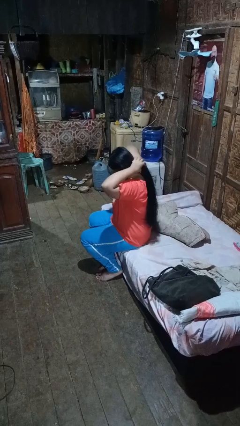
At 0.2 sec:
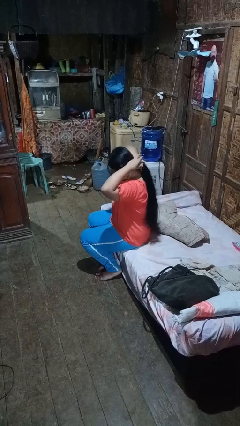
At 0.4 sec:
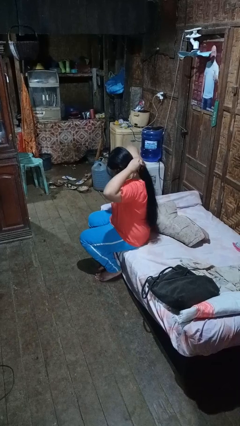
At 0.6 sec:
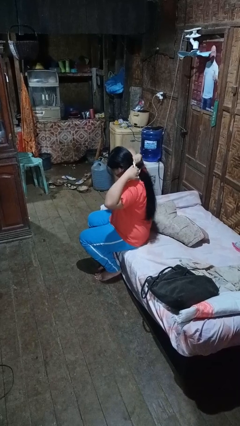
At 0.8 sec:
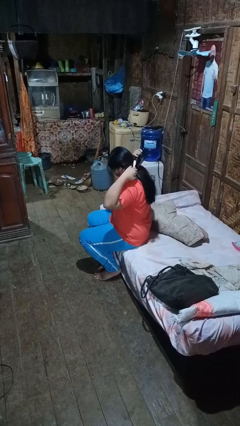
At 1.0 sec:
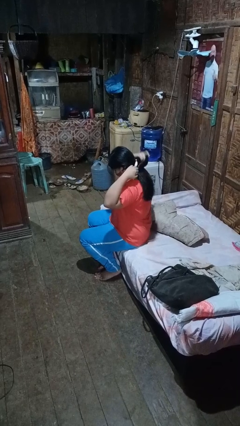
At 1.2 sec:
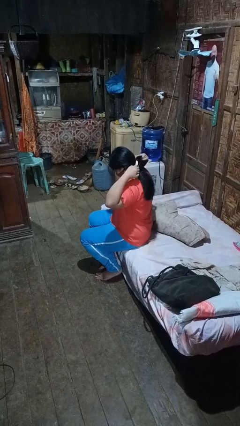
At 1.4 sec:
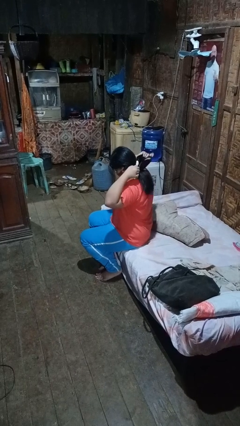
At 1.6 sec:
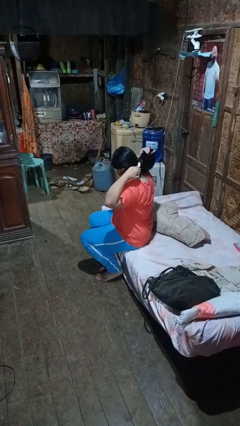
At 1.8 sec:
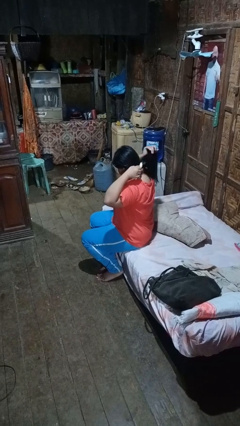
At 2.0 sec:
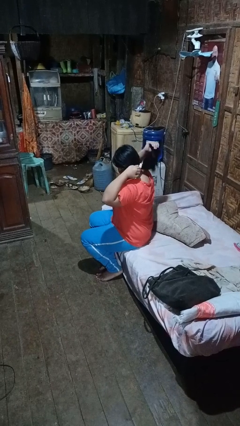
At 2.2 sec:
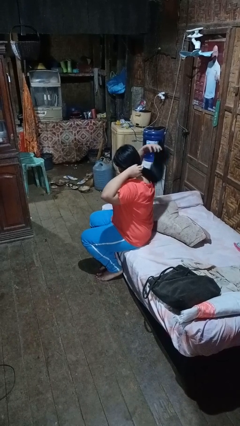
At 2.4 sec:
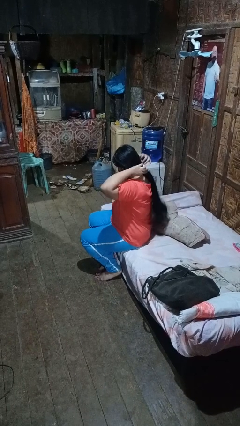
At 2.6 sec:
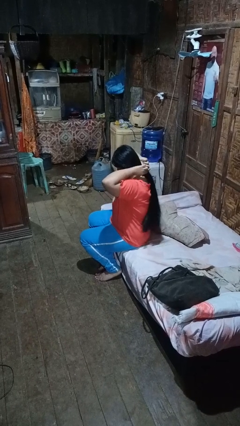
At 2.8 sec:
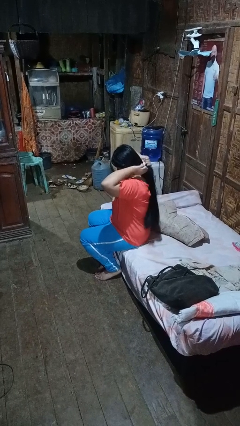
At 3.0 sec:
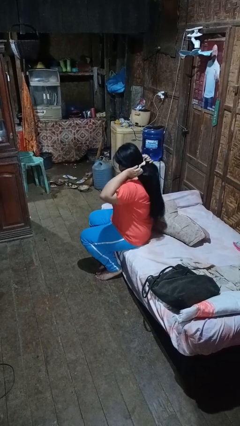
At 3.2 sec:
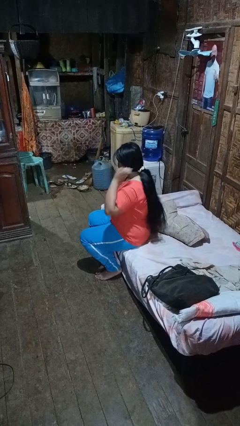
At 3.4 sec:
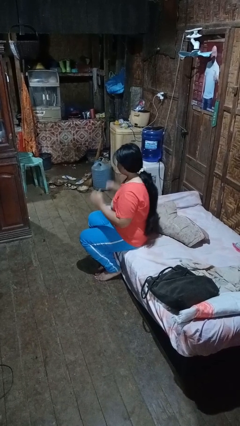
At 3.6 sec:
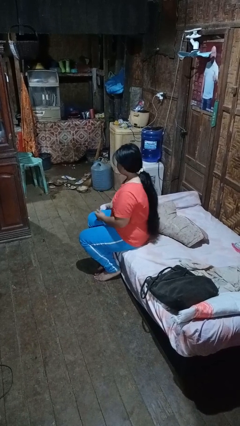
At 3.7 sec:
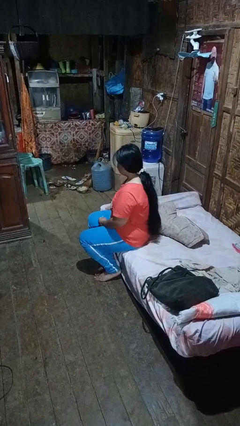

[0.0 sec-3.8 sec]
person puts hair in ponytail

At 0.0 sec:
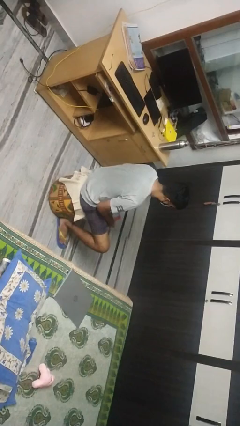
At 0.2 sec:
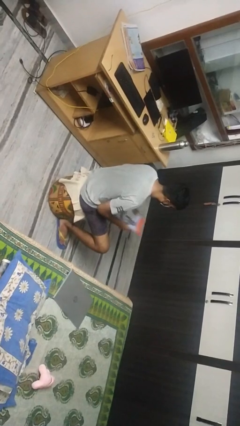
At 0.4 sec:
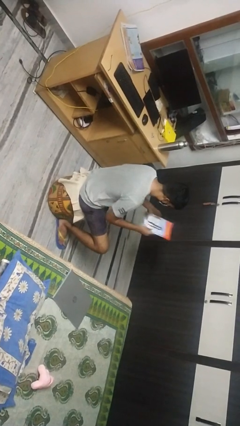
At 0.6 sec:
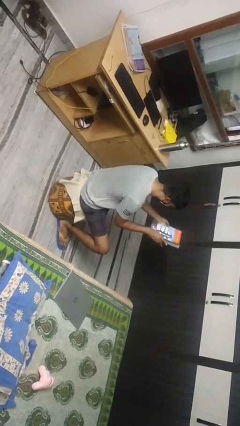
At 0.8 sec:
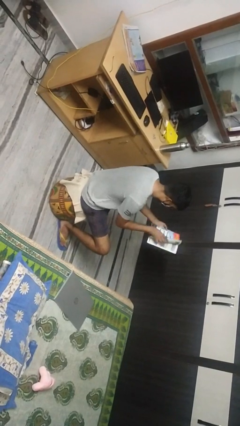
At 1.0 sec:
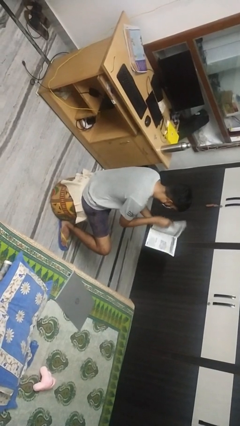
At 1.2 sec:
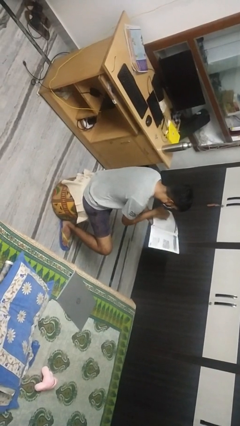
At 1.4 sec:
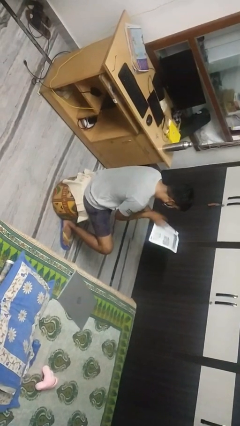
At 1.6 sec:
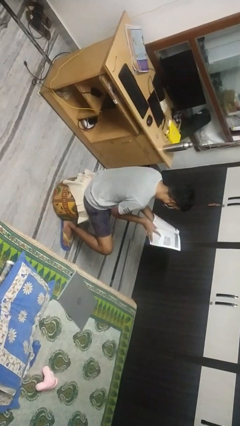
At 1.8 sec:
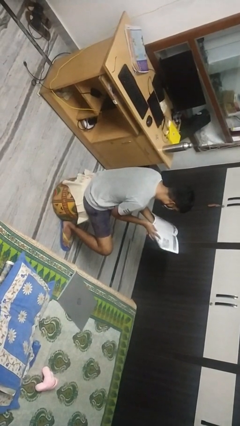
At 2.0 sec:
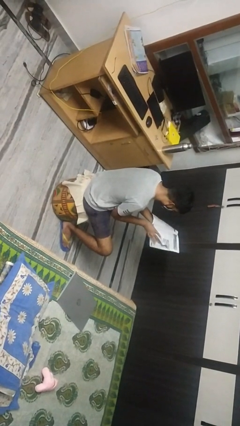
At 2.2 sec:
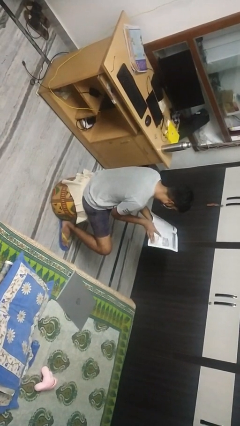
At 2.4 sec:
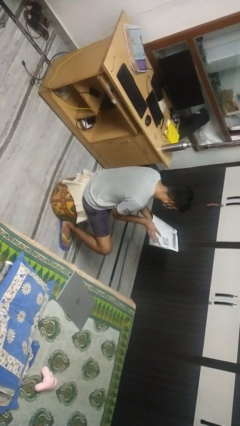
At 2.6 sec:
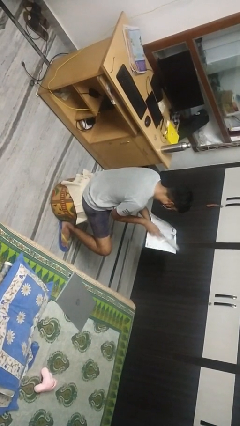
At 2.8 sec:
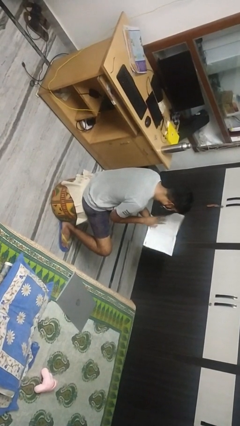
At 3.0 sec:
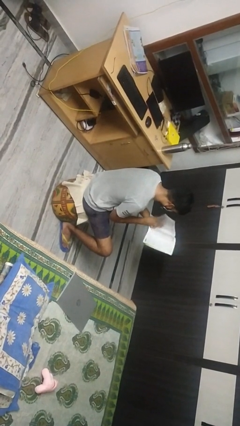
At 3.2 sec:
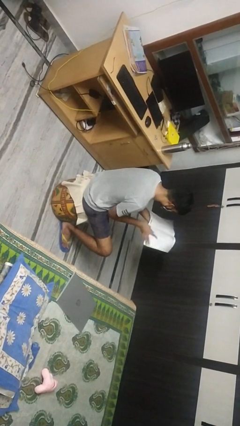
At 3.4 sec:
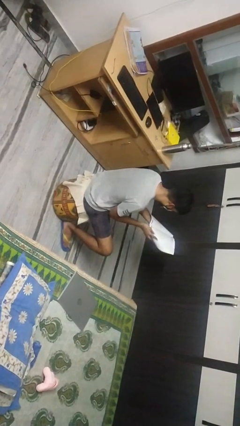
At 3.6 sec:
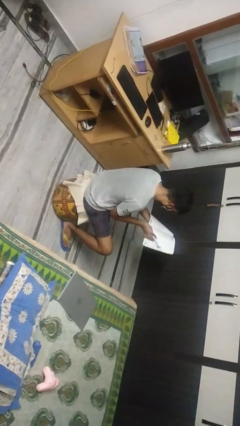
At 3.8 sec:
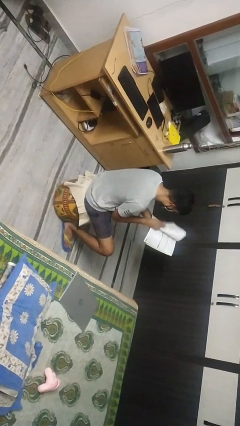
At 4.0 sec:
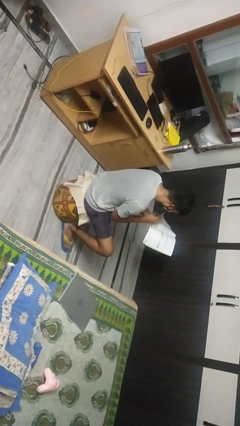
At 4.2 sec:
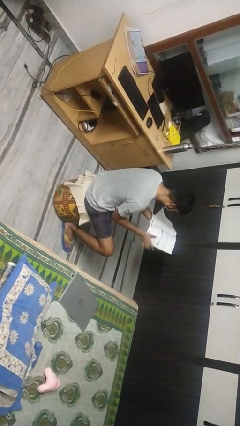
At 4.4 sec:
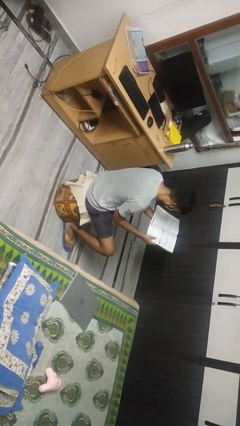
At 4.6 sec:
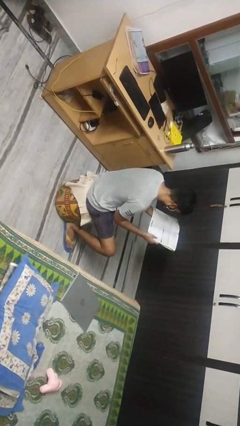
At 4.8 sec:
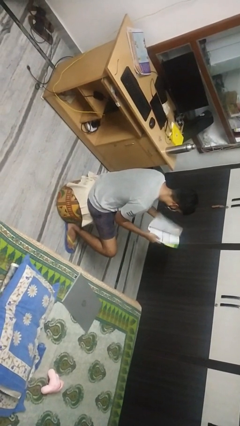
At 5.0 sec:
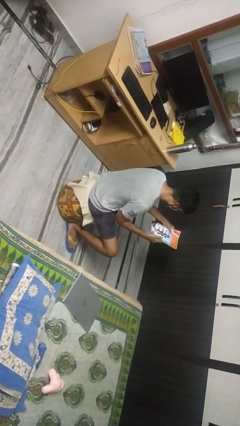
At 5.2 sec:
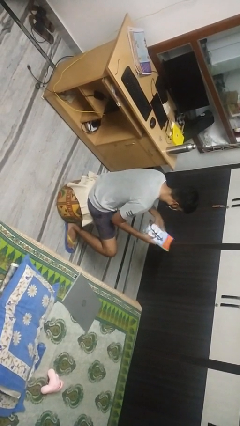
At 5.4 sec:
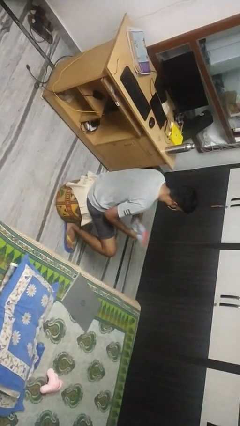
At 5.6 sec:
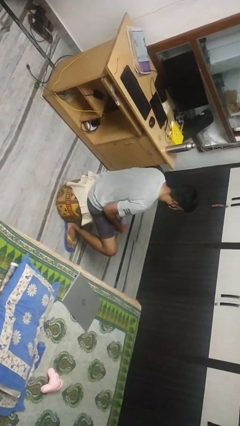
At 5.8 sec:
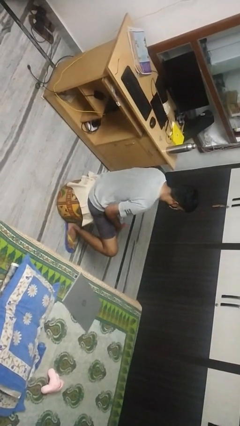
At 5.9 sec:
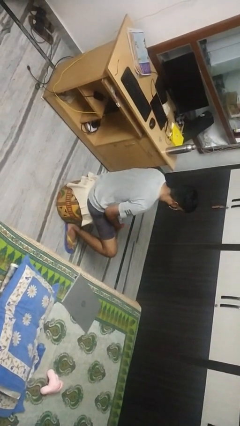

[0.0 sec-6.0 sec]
person reads magazine

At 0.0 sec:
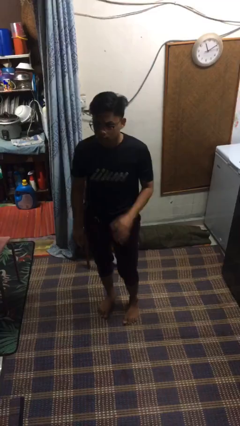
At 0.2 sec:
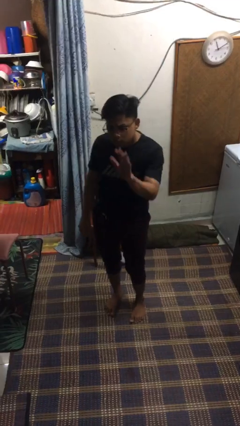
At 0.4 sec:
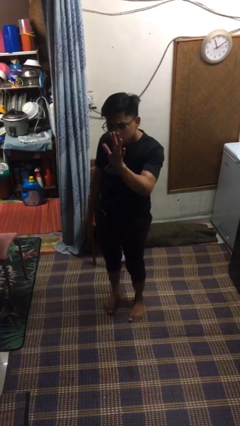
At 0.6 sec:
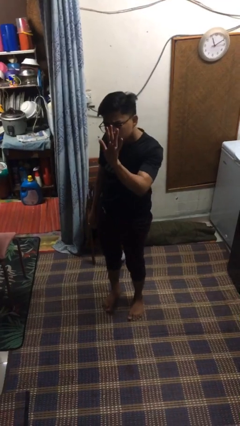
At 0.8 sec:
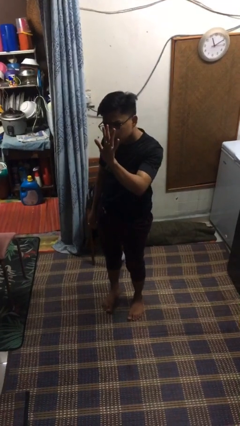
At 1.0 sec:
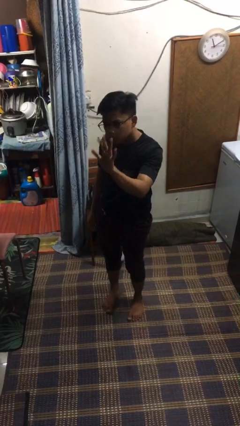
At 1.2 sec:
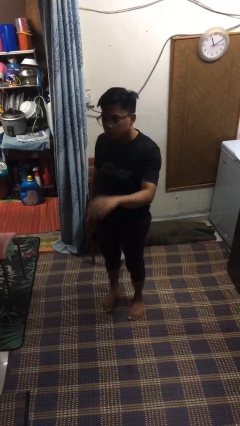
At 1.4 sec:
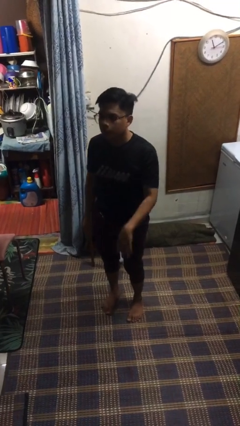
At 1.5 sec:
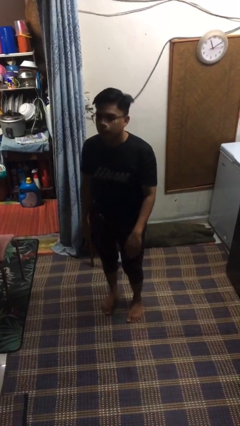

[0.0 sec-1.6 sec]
person gestures stop

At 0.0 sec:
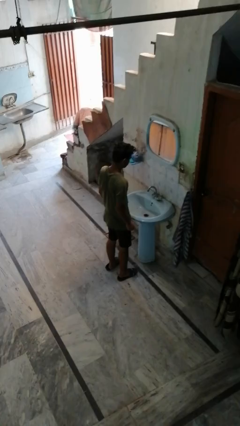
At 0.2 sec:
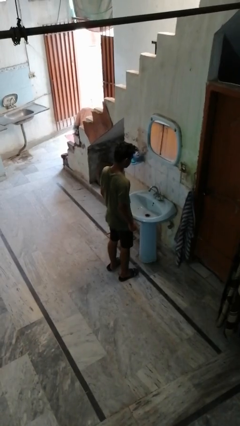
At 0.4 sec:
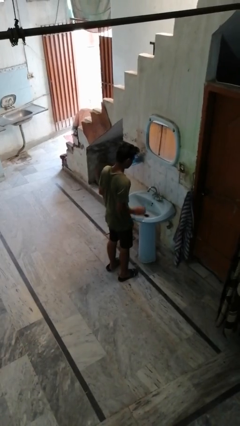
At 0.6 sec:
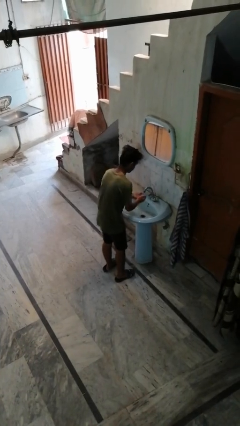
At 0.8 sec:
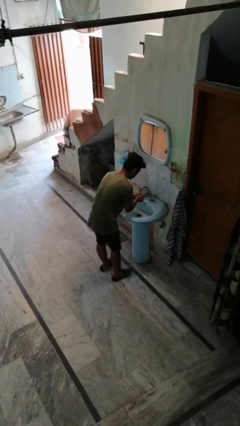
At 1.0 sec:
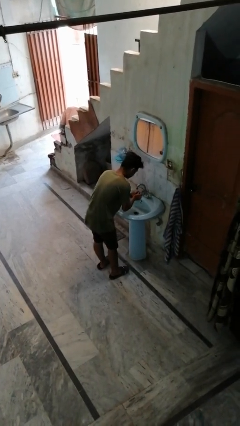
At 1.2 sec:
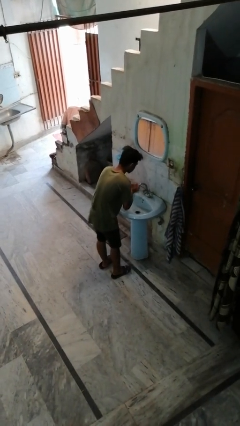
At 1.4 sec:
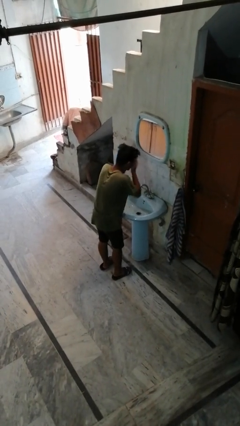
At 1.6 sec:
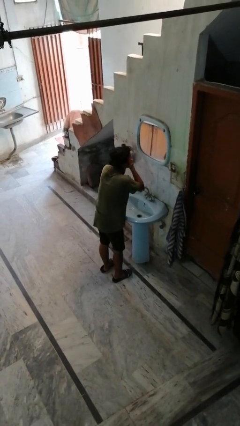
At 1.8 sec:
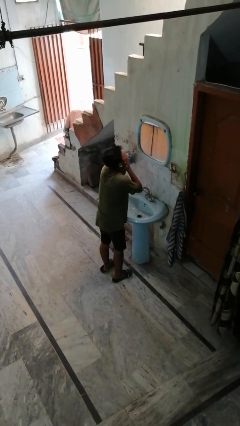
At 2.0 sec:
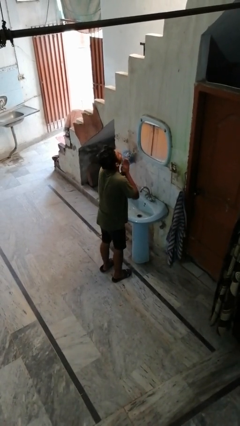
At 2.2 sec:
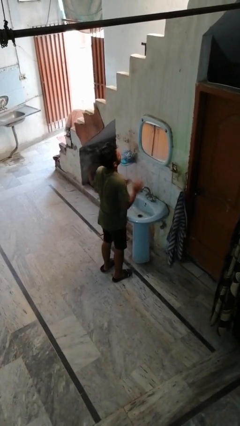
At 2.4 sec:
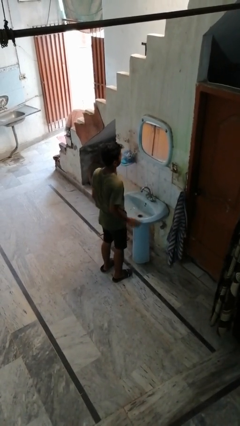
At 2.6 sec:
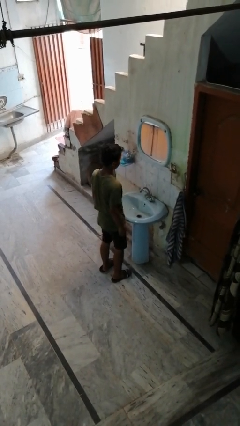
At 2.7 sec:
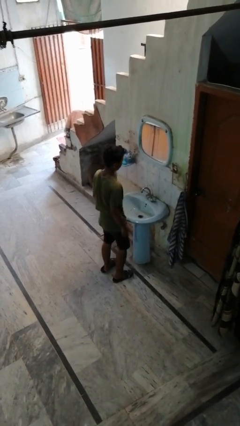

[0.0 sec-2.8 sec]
person washes face

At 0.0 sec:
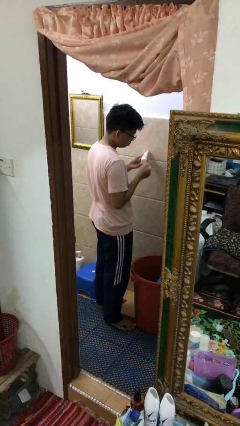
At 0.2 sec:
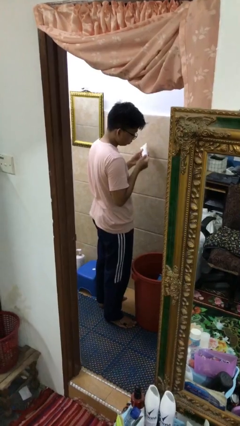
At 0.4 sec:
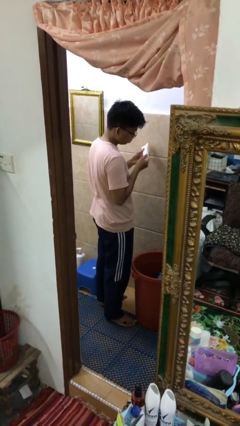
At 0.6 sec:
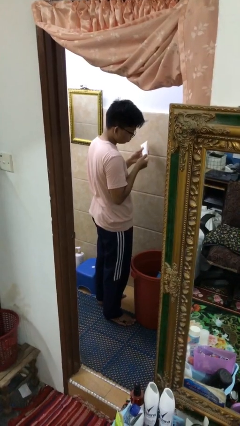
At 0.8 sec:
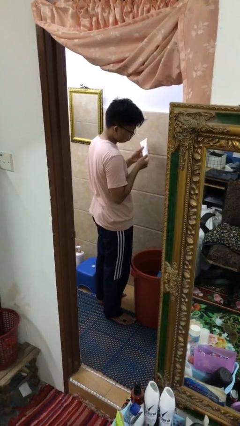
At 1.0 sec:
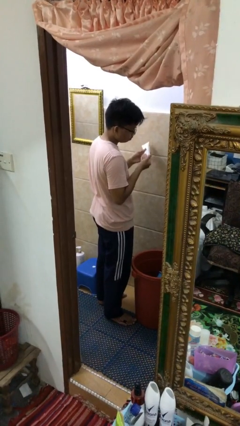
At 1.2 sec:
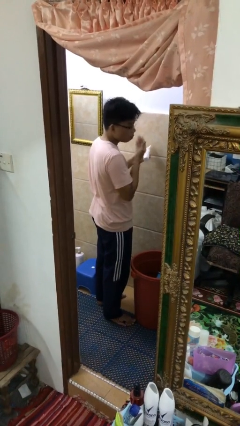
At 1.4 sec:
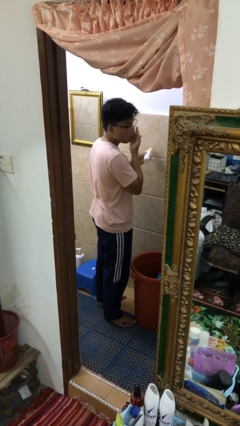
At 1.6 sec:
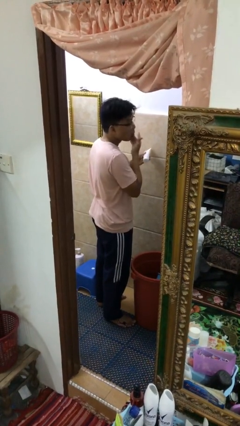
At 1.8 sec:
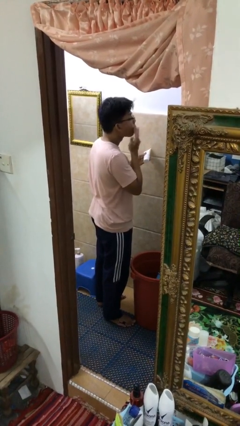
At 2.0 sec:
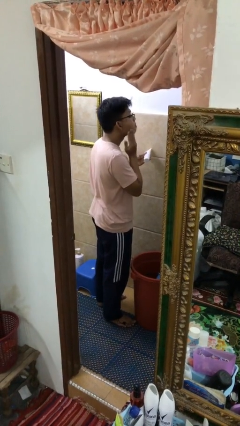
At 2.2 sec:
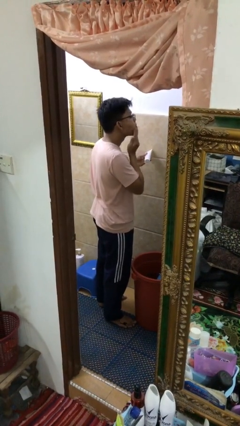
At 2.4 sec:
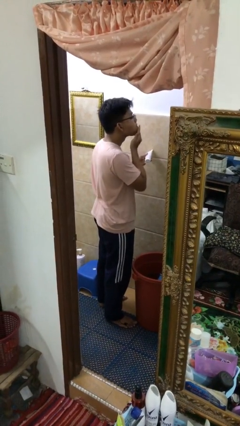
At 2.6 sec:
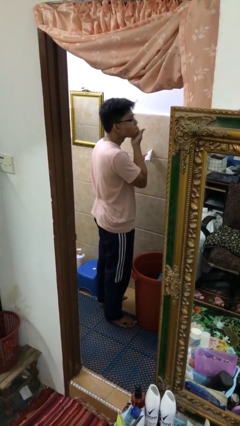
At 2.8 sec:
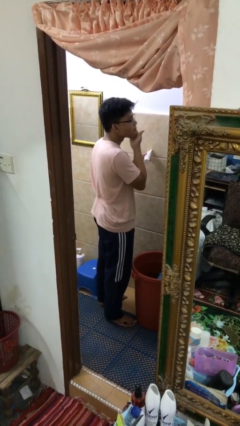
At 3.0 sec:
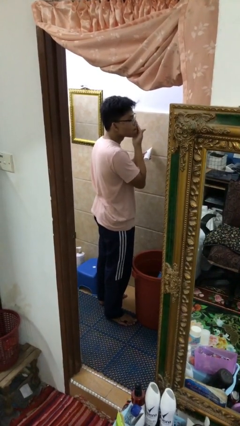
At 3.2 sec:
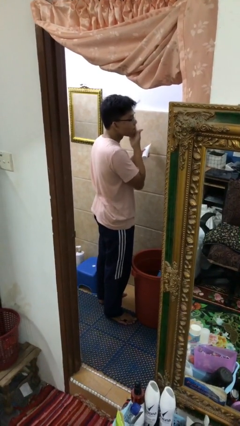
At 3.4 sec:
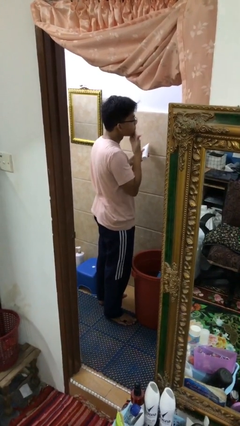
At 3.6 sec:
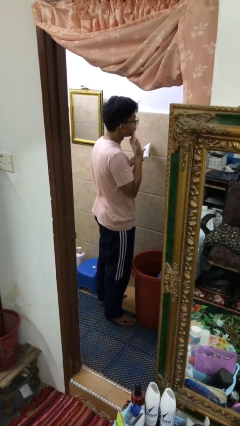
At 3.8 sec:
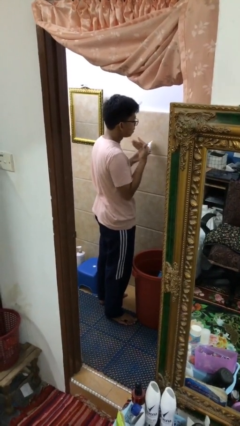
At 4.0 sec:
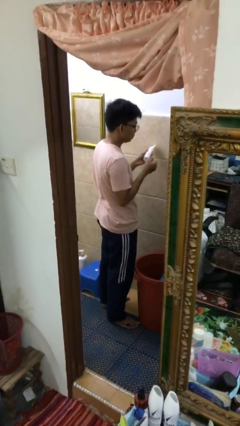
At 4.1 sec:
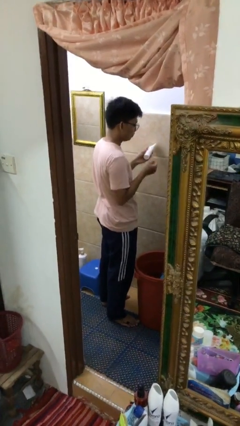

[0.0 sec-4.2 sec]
person applies facial moisturizer
